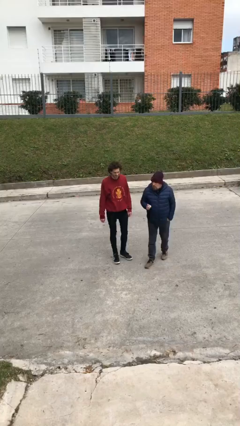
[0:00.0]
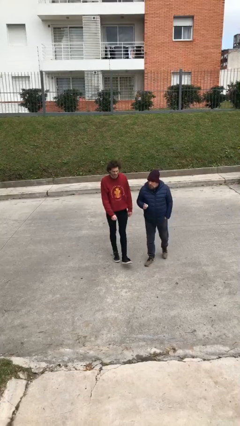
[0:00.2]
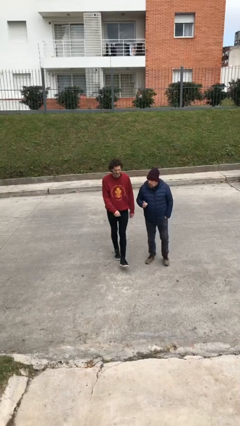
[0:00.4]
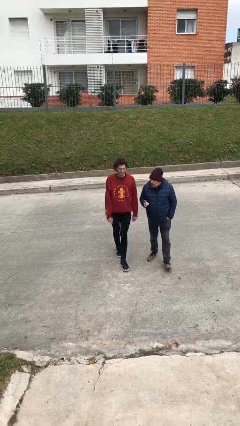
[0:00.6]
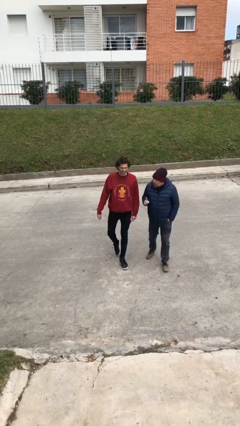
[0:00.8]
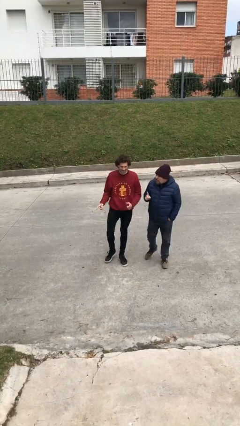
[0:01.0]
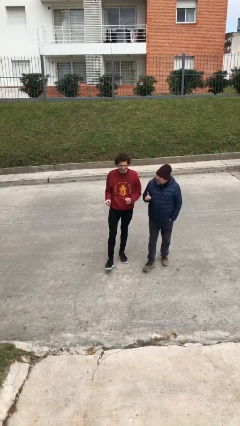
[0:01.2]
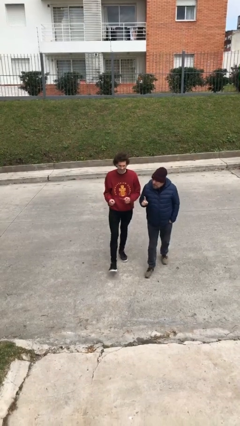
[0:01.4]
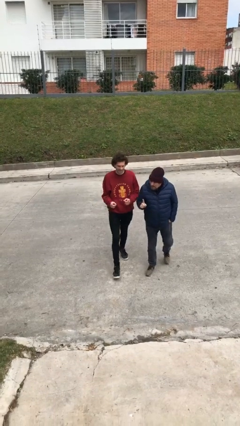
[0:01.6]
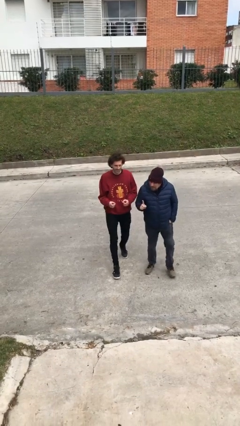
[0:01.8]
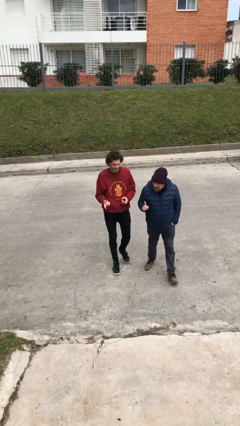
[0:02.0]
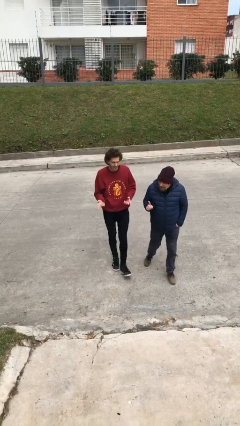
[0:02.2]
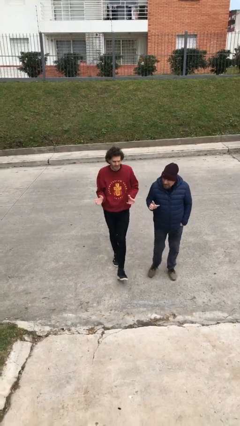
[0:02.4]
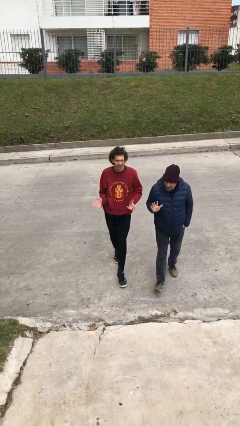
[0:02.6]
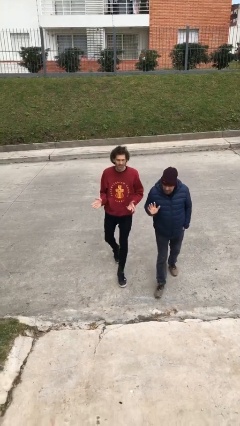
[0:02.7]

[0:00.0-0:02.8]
person talks to person

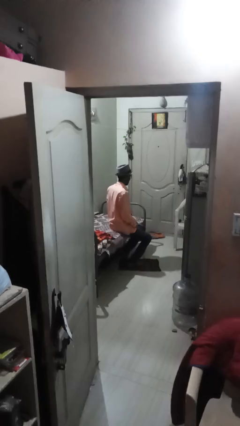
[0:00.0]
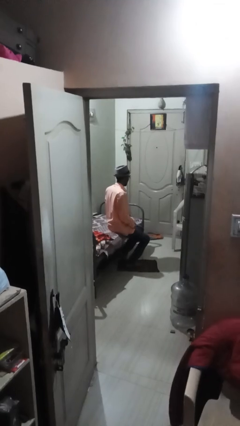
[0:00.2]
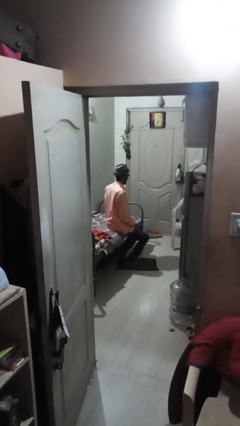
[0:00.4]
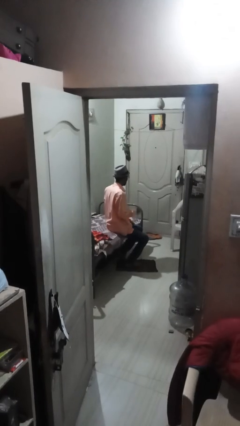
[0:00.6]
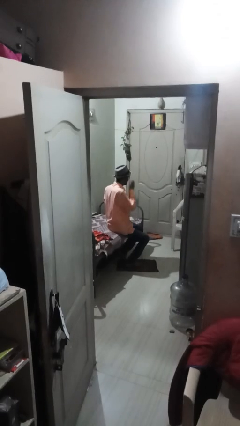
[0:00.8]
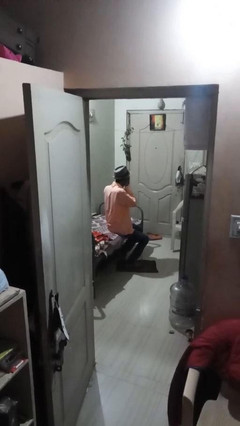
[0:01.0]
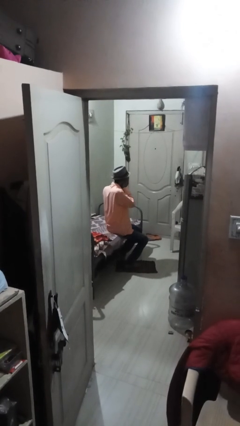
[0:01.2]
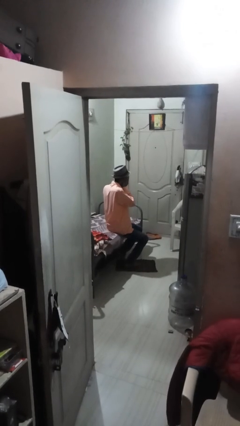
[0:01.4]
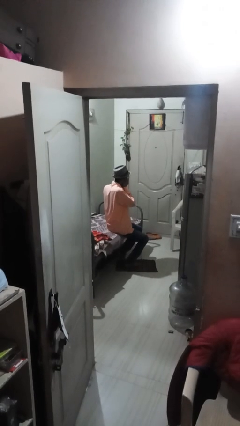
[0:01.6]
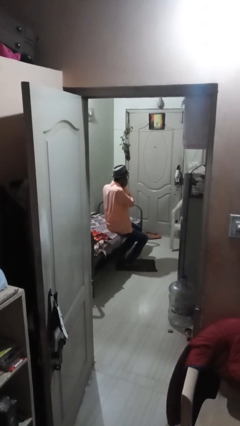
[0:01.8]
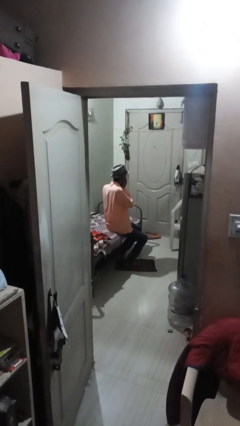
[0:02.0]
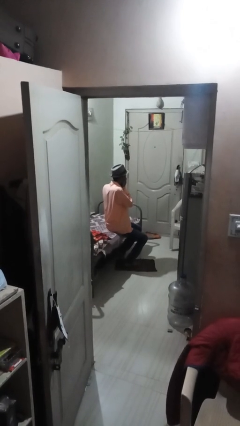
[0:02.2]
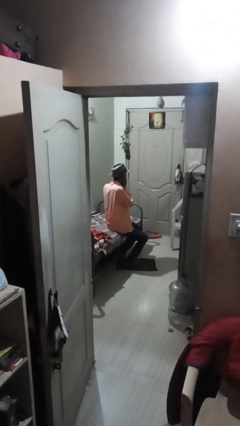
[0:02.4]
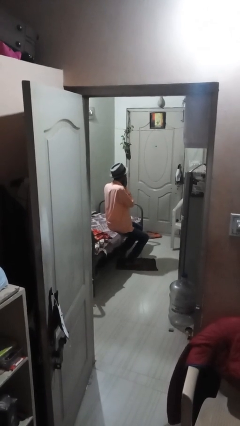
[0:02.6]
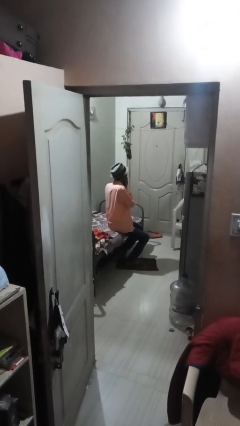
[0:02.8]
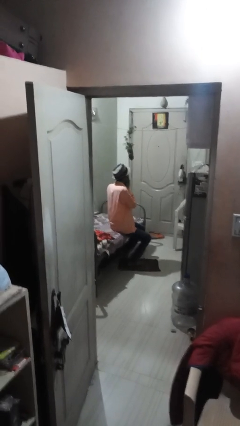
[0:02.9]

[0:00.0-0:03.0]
person covers face with hands

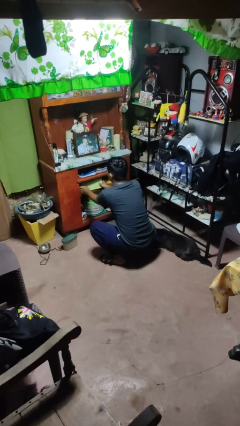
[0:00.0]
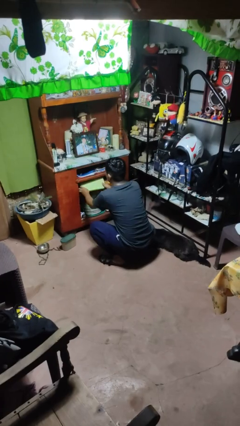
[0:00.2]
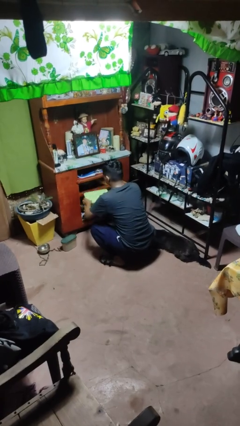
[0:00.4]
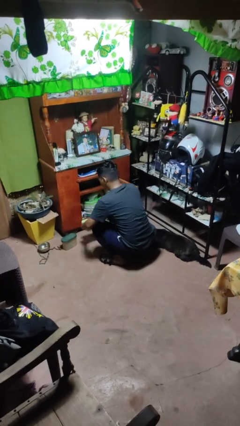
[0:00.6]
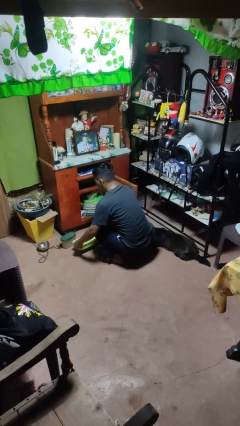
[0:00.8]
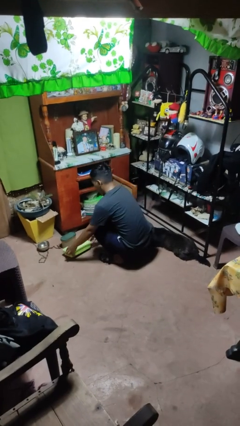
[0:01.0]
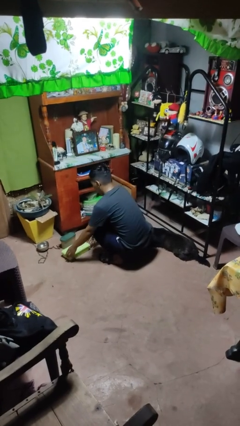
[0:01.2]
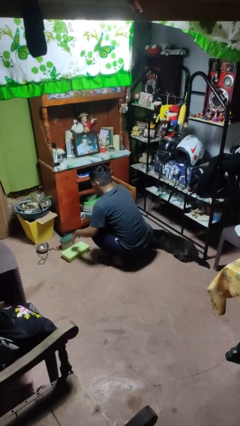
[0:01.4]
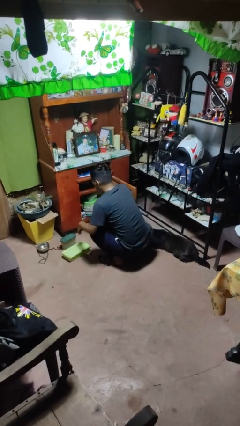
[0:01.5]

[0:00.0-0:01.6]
person takes object from cabinet

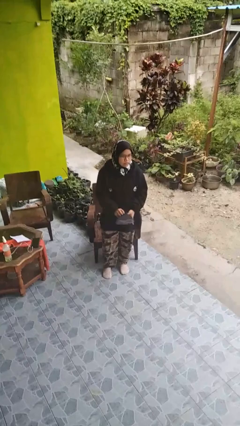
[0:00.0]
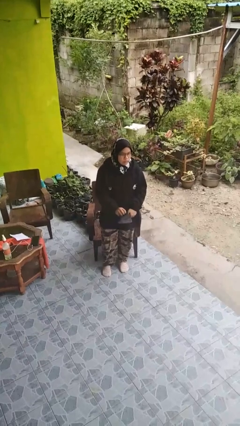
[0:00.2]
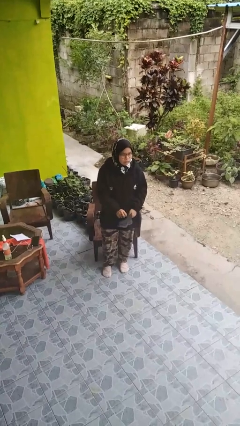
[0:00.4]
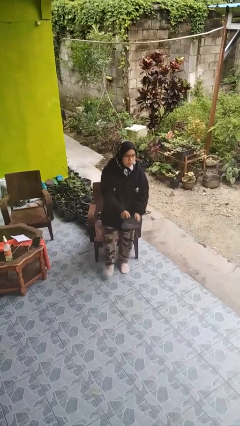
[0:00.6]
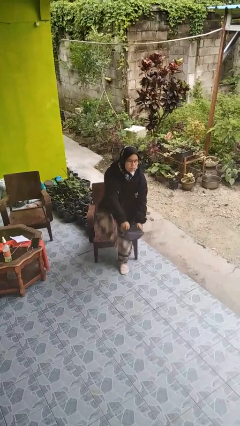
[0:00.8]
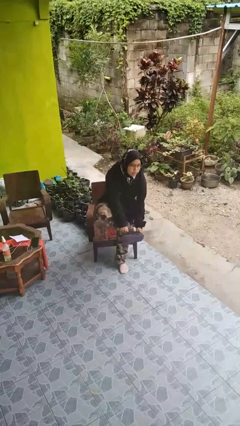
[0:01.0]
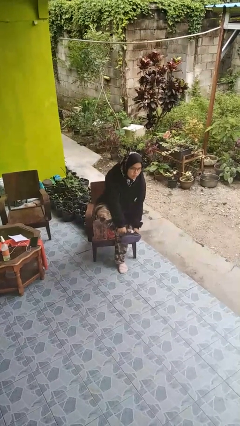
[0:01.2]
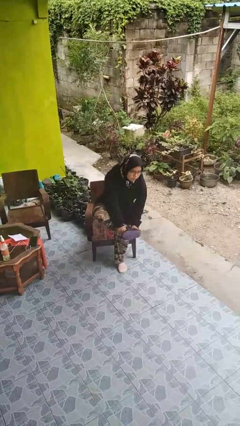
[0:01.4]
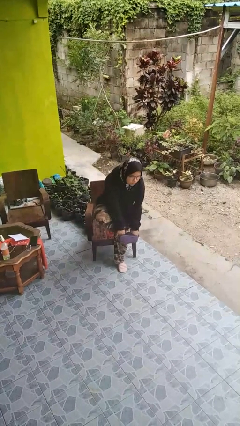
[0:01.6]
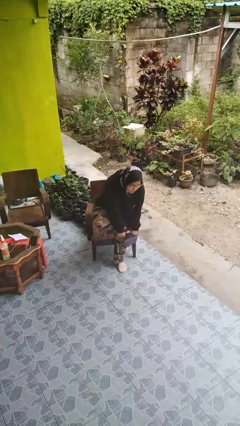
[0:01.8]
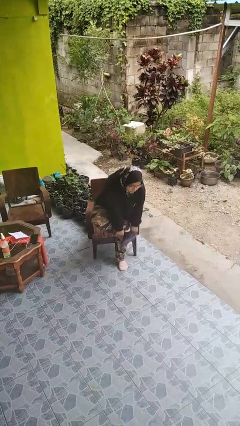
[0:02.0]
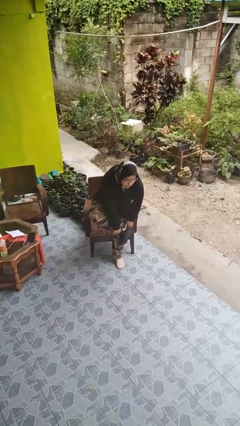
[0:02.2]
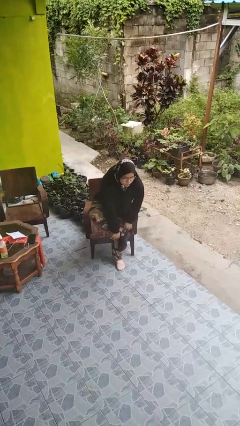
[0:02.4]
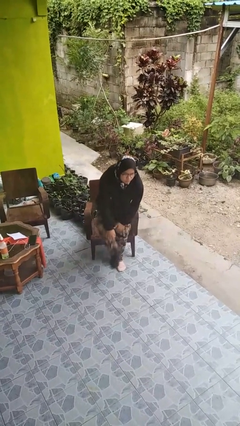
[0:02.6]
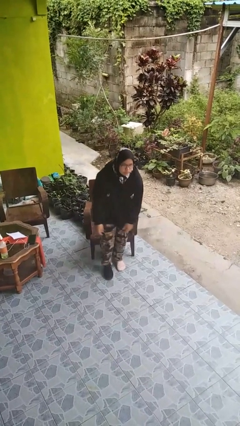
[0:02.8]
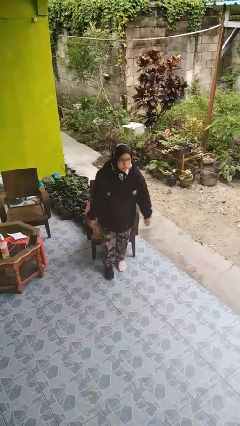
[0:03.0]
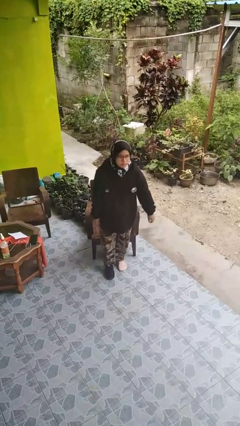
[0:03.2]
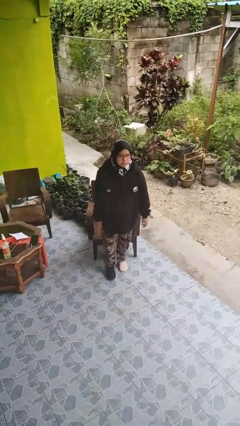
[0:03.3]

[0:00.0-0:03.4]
person puts on shoes

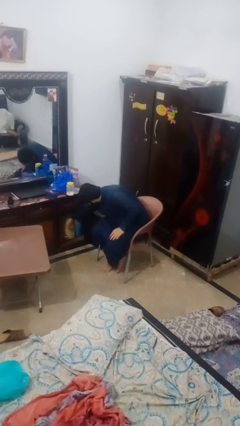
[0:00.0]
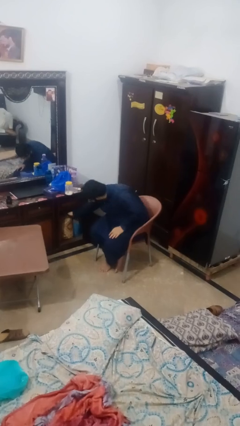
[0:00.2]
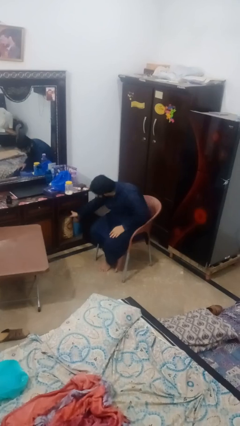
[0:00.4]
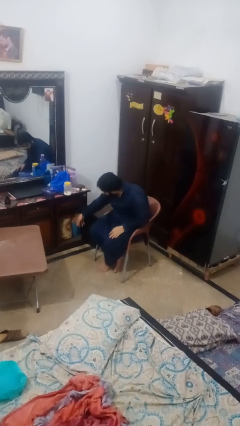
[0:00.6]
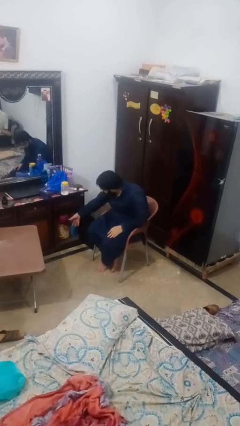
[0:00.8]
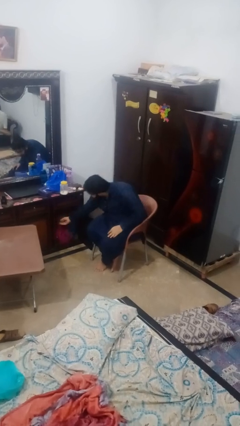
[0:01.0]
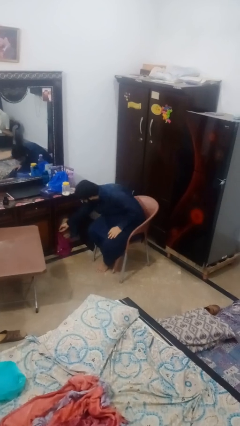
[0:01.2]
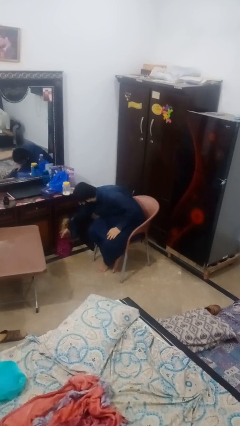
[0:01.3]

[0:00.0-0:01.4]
person puts clothes into dresser

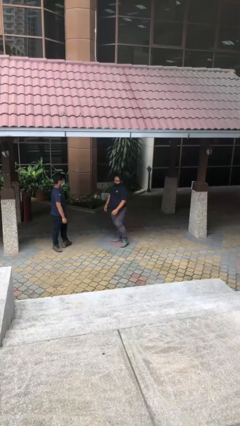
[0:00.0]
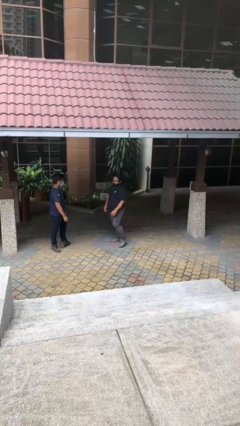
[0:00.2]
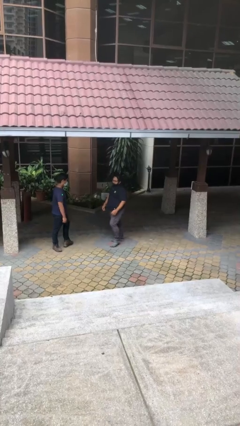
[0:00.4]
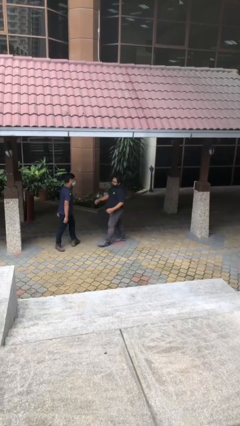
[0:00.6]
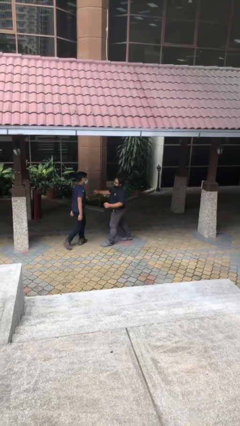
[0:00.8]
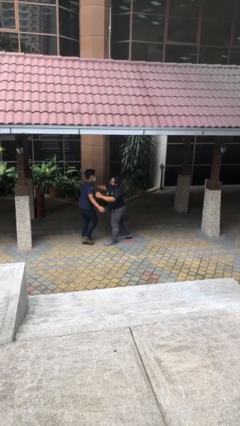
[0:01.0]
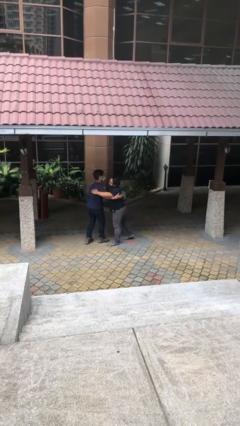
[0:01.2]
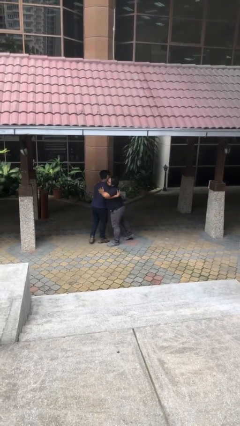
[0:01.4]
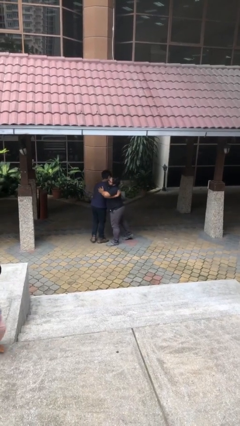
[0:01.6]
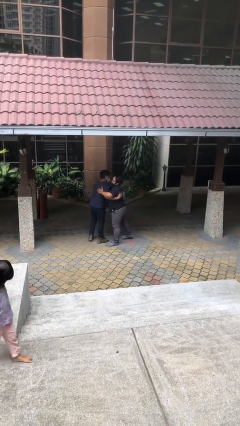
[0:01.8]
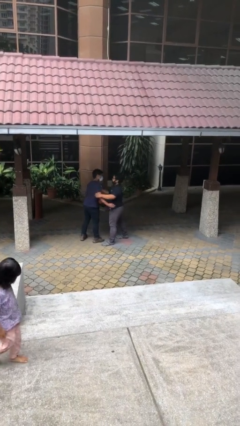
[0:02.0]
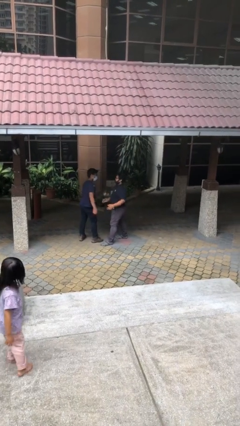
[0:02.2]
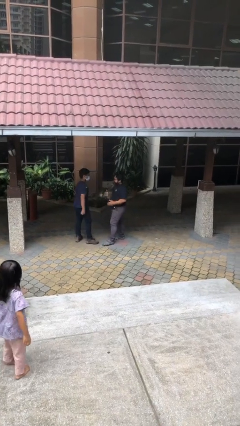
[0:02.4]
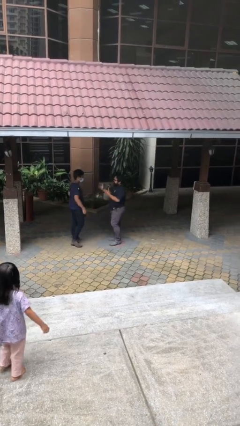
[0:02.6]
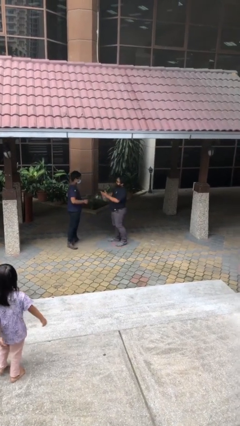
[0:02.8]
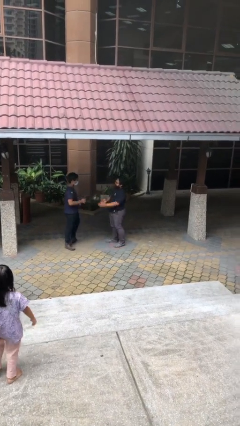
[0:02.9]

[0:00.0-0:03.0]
person embraces person

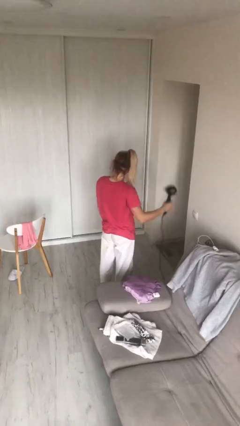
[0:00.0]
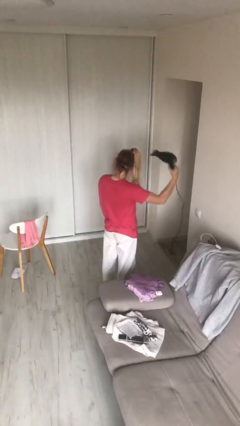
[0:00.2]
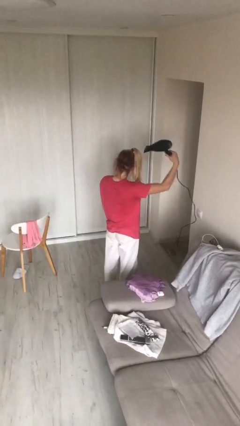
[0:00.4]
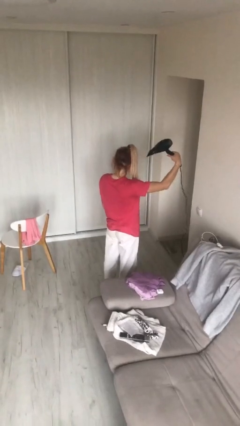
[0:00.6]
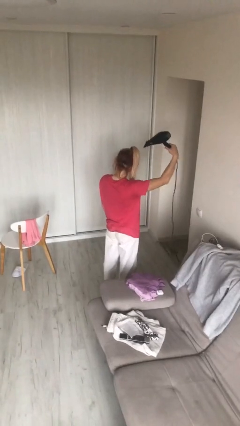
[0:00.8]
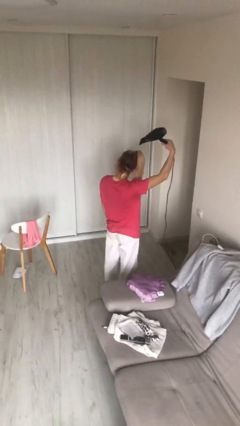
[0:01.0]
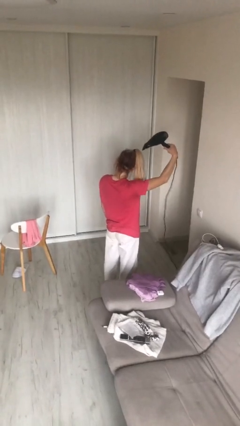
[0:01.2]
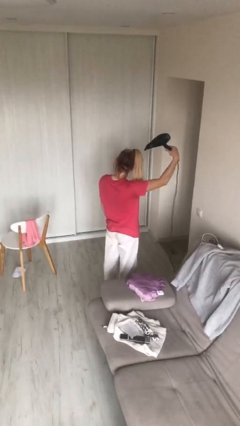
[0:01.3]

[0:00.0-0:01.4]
person dries hair with hairdryer

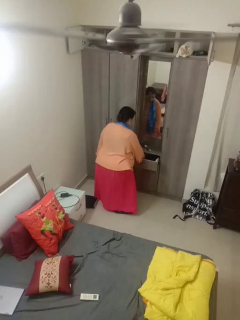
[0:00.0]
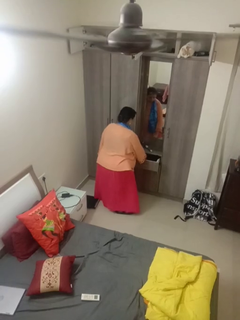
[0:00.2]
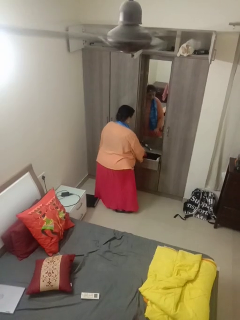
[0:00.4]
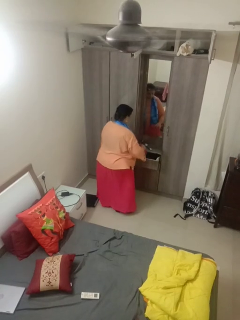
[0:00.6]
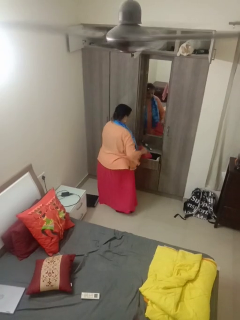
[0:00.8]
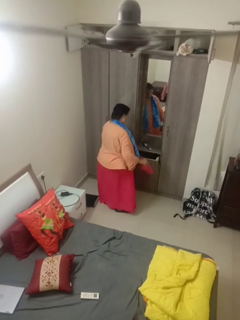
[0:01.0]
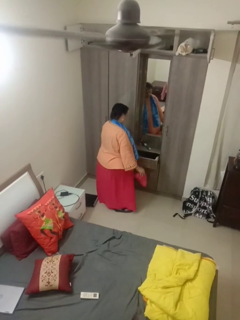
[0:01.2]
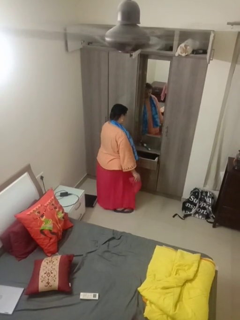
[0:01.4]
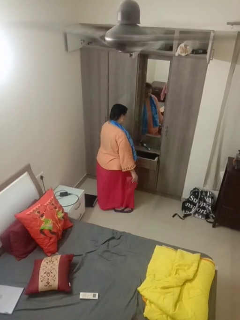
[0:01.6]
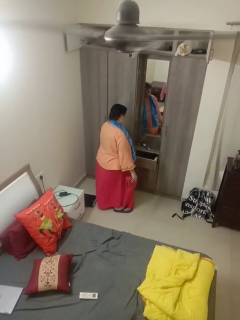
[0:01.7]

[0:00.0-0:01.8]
person takes clothes from dresser
